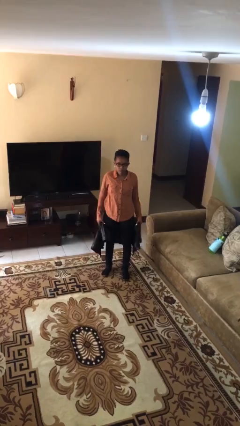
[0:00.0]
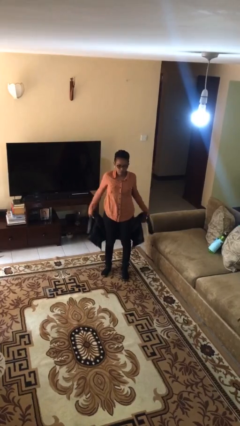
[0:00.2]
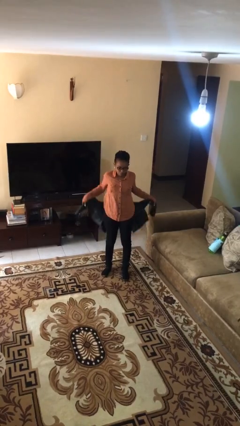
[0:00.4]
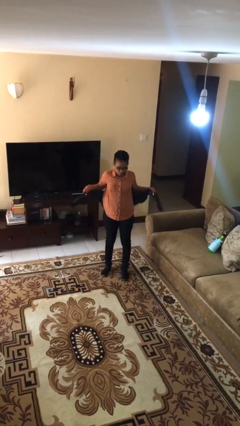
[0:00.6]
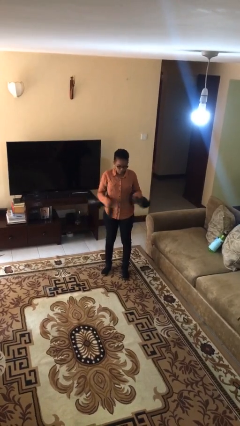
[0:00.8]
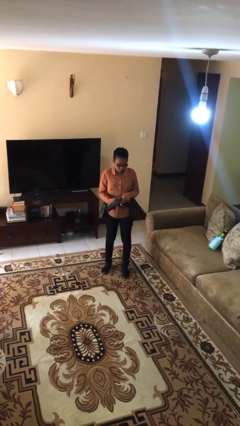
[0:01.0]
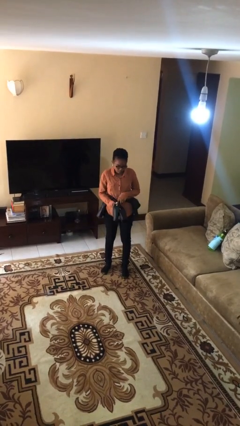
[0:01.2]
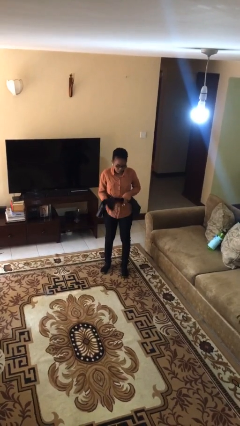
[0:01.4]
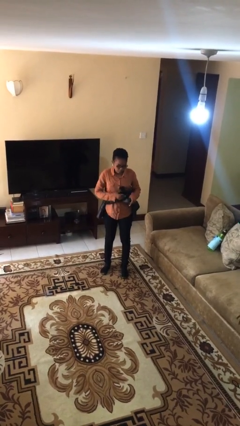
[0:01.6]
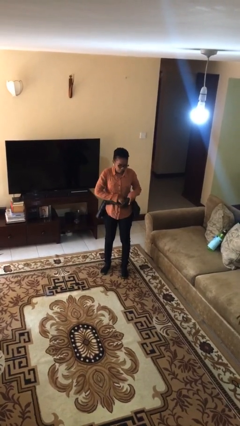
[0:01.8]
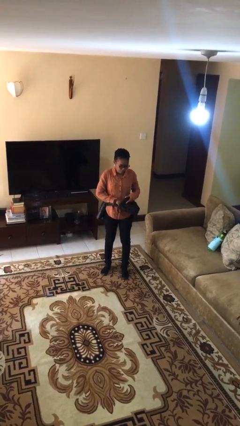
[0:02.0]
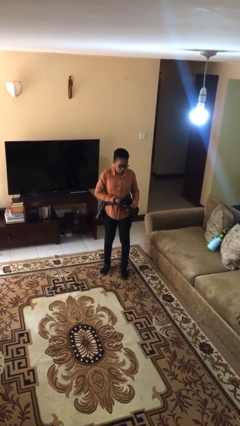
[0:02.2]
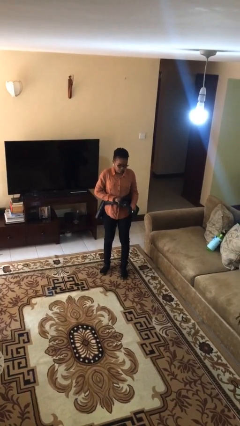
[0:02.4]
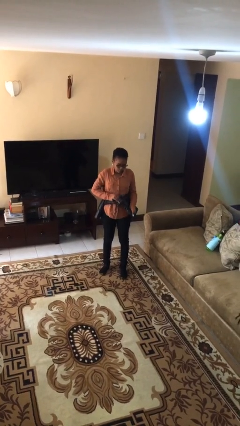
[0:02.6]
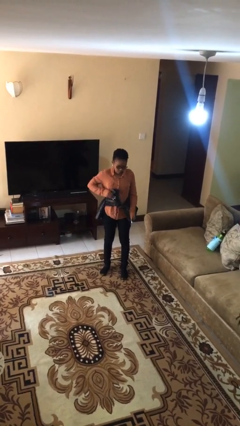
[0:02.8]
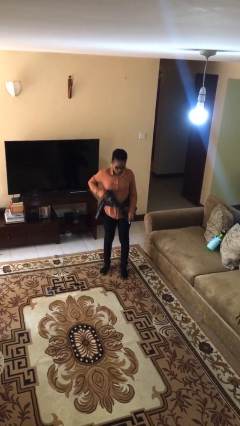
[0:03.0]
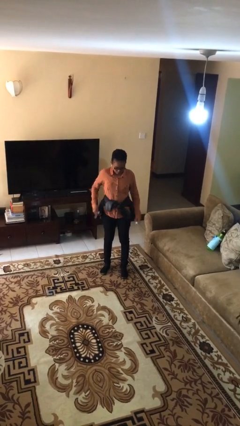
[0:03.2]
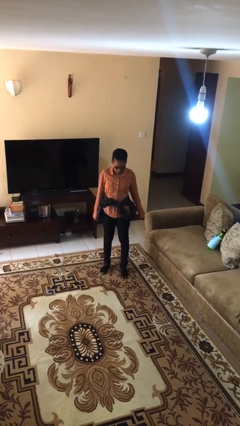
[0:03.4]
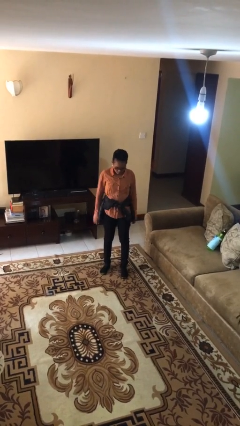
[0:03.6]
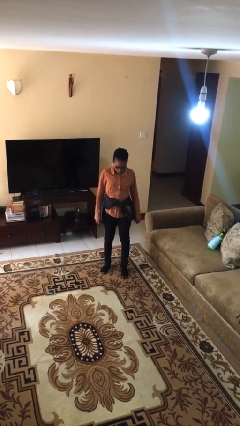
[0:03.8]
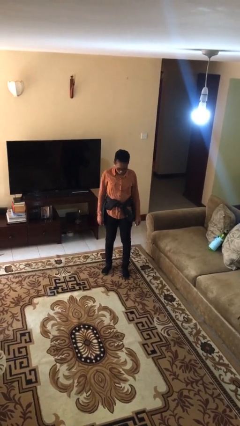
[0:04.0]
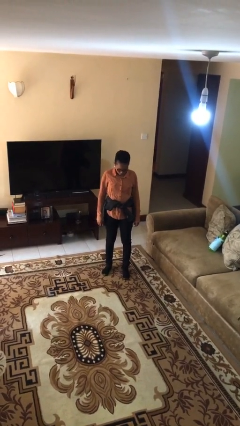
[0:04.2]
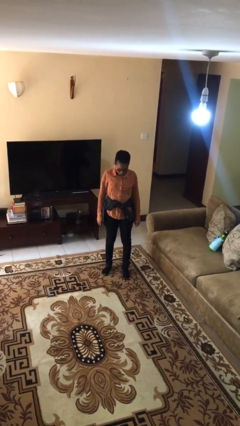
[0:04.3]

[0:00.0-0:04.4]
person ties jacket around waist

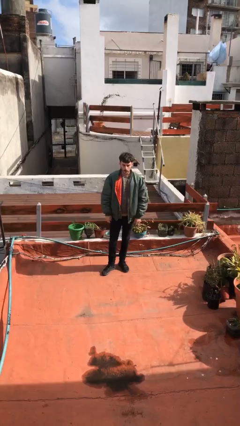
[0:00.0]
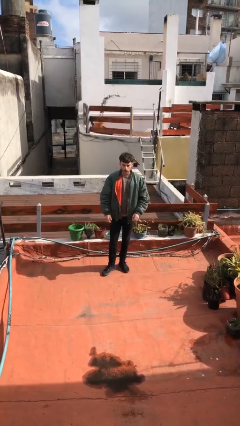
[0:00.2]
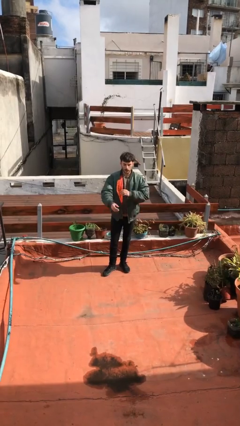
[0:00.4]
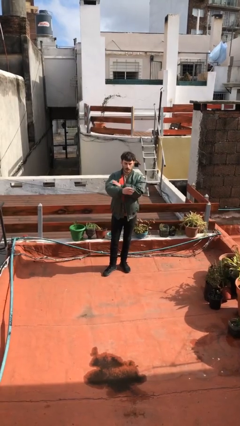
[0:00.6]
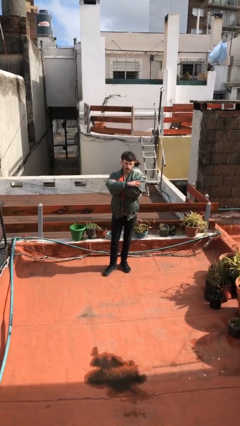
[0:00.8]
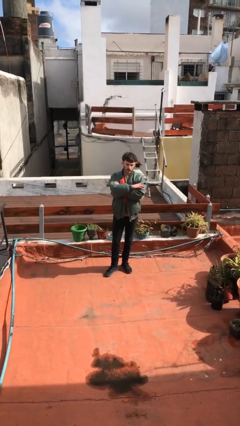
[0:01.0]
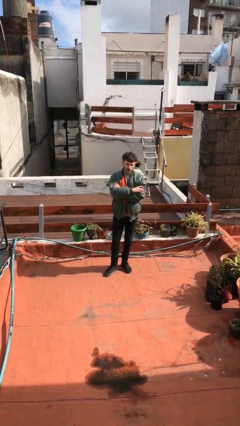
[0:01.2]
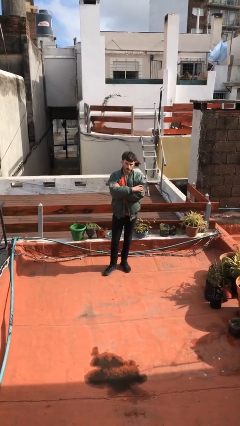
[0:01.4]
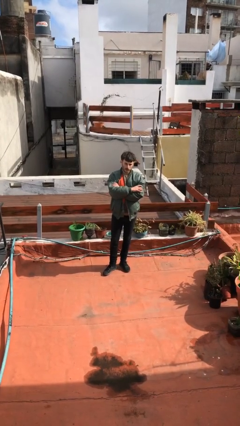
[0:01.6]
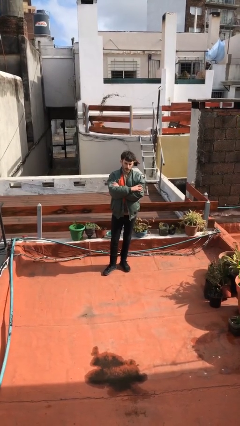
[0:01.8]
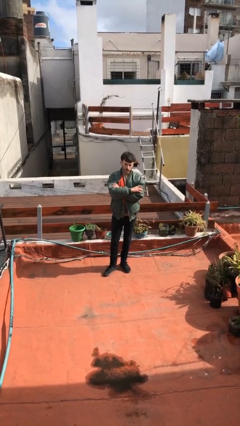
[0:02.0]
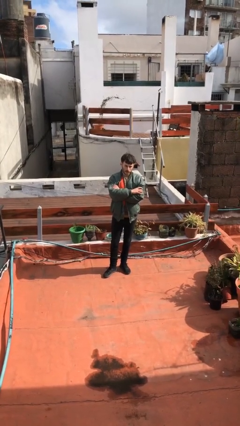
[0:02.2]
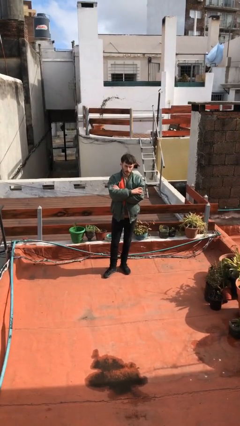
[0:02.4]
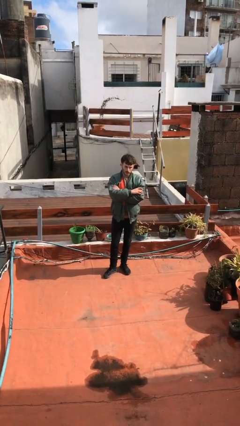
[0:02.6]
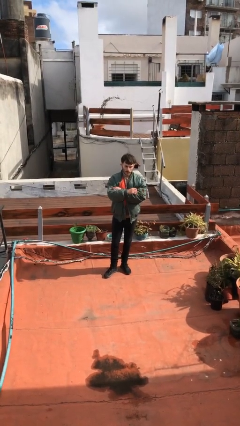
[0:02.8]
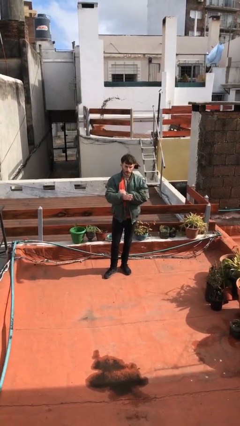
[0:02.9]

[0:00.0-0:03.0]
person crosses arms

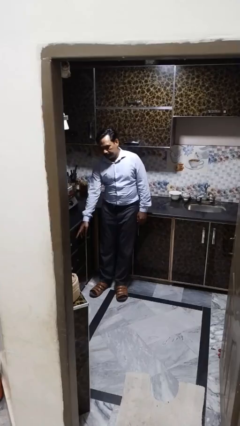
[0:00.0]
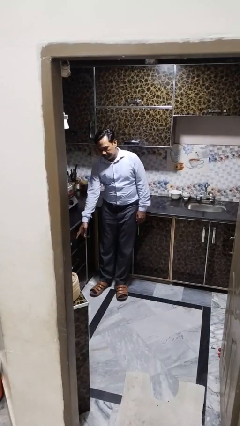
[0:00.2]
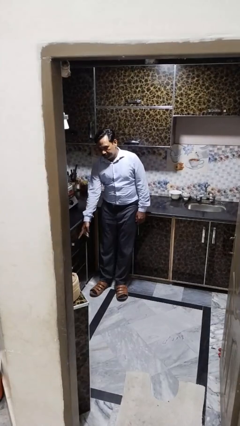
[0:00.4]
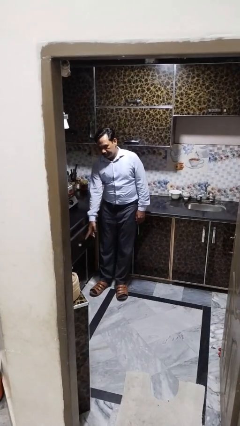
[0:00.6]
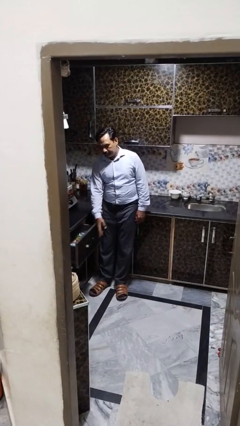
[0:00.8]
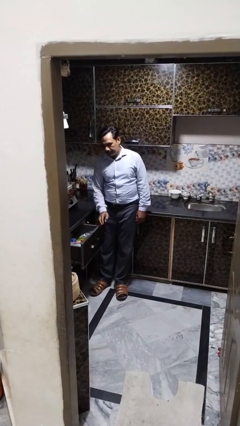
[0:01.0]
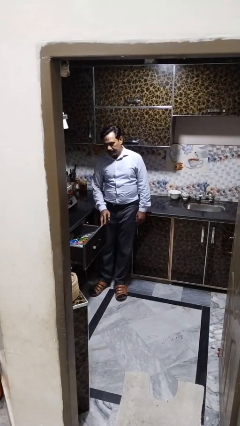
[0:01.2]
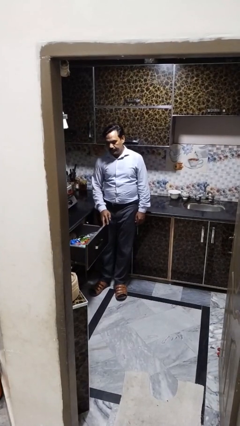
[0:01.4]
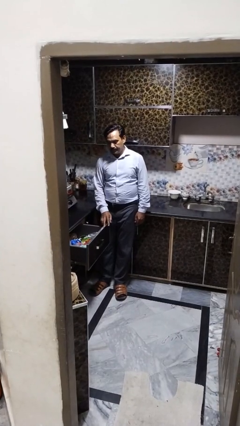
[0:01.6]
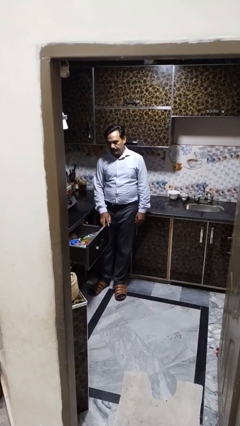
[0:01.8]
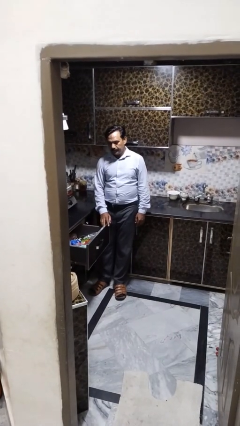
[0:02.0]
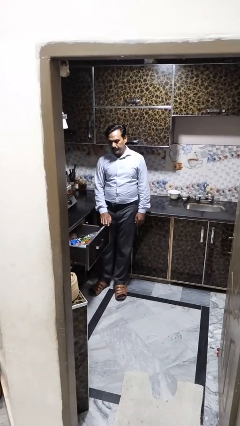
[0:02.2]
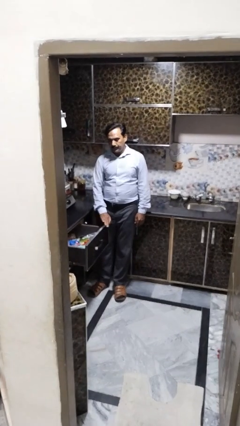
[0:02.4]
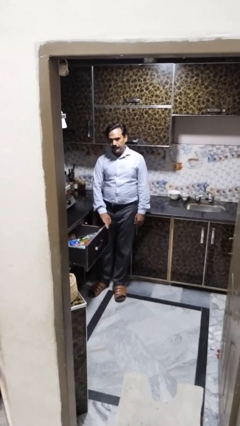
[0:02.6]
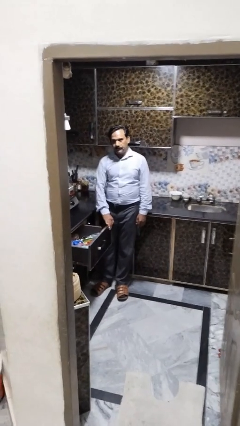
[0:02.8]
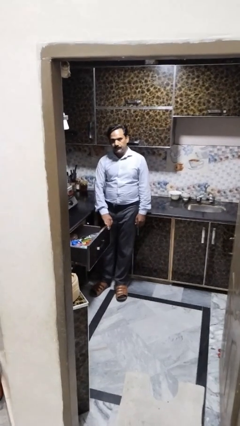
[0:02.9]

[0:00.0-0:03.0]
person opens kitchen drawer

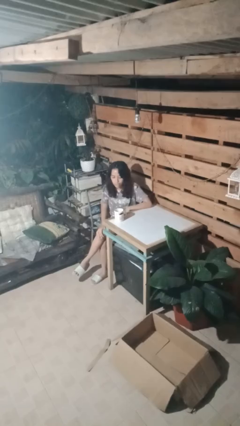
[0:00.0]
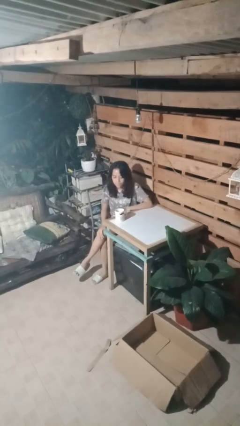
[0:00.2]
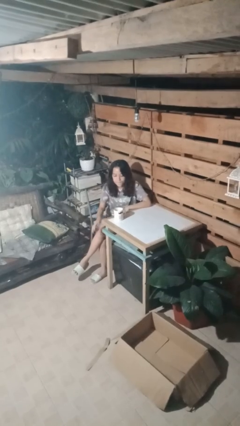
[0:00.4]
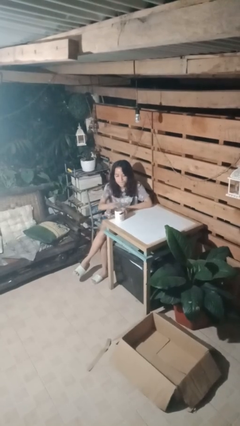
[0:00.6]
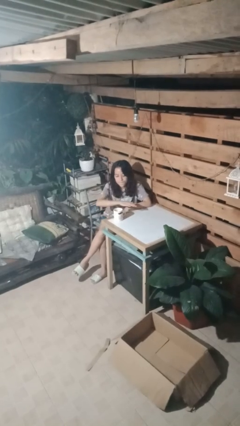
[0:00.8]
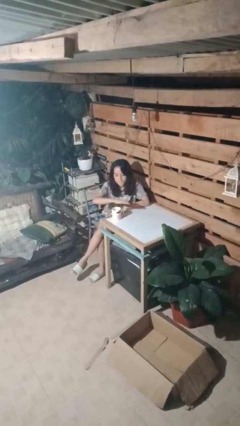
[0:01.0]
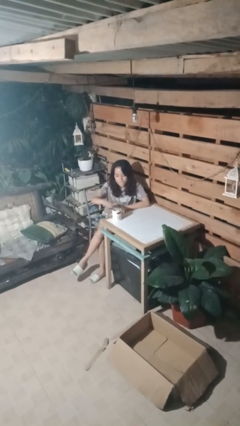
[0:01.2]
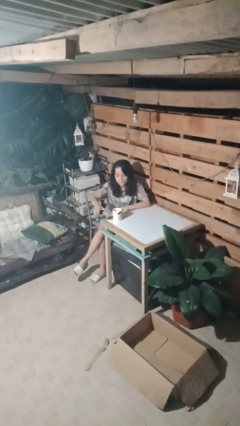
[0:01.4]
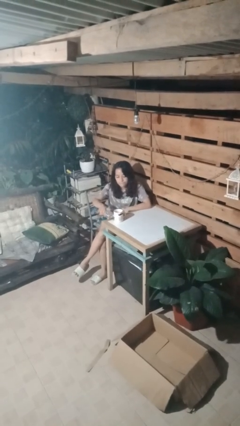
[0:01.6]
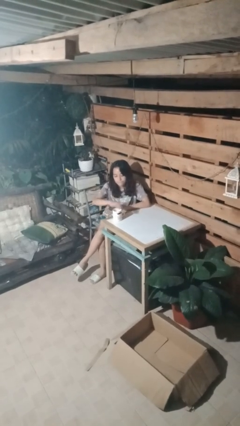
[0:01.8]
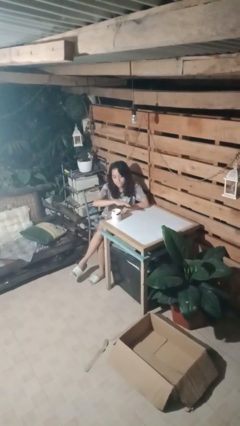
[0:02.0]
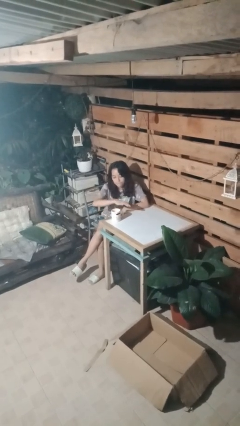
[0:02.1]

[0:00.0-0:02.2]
person waves hand over object

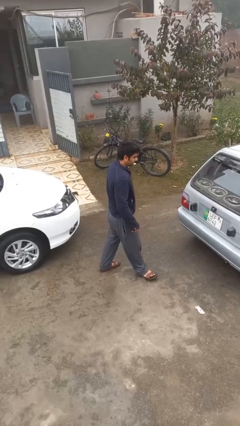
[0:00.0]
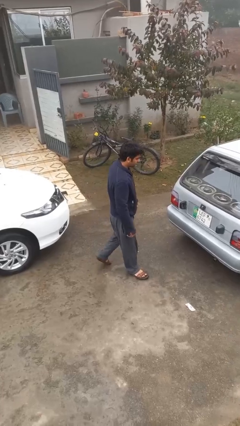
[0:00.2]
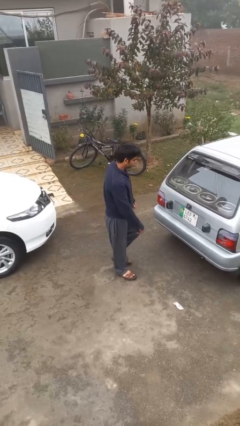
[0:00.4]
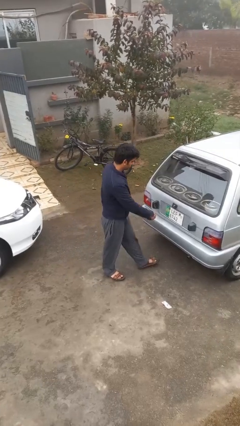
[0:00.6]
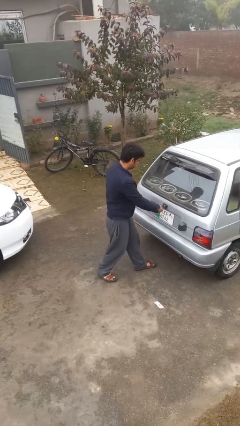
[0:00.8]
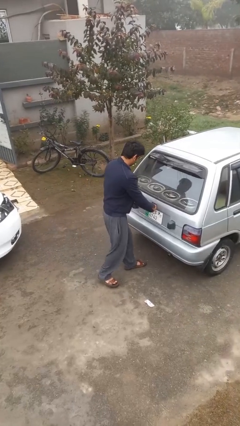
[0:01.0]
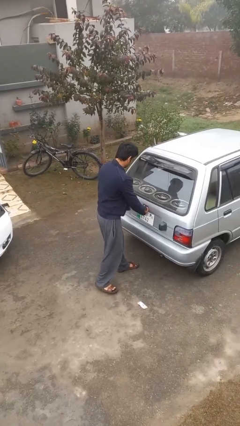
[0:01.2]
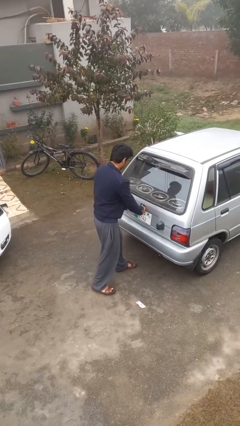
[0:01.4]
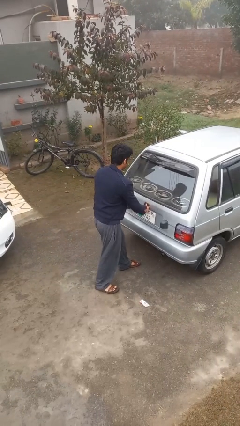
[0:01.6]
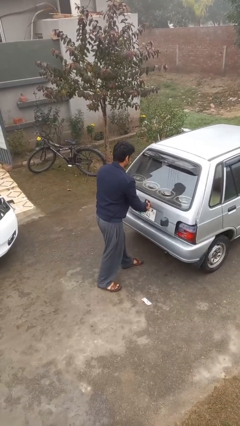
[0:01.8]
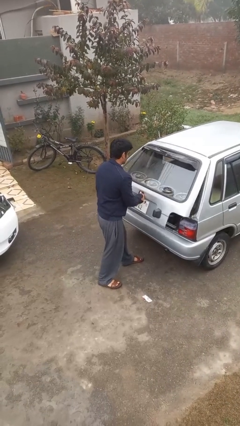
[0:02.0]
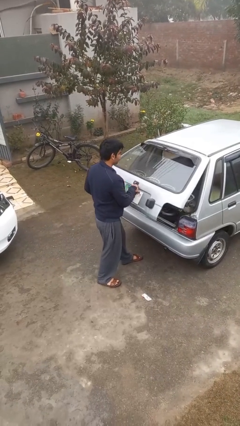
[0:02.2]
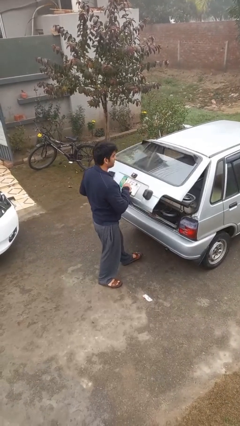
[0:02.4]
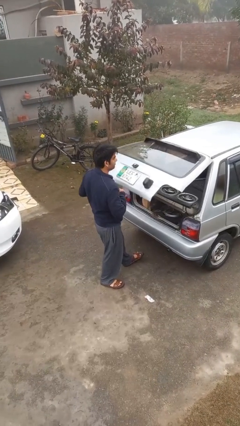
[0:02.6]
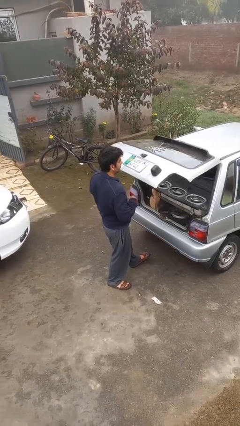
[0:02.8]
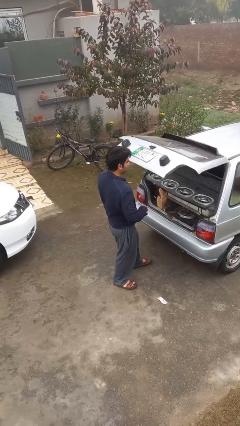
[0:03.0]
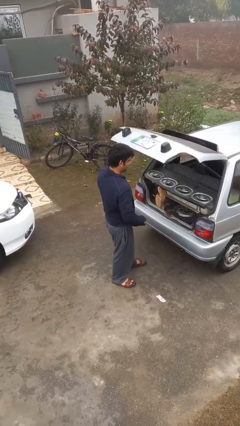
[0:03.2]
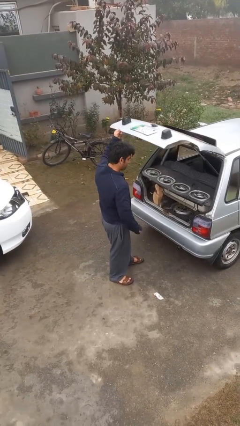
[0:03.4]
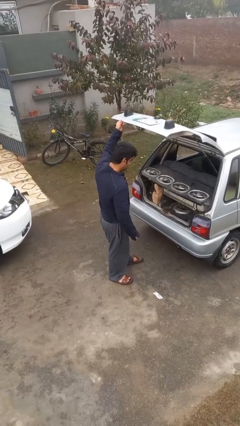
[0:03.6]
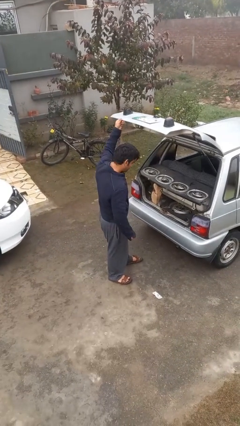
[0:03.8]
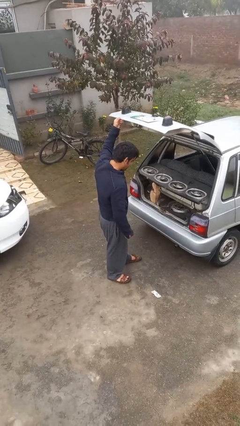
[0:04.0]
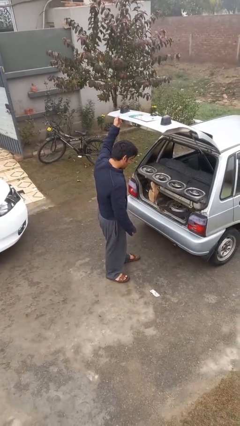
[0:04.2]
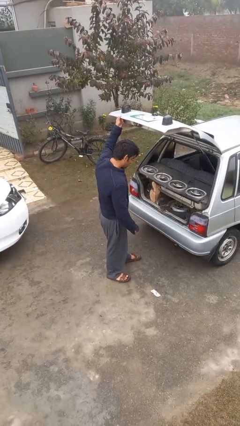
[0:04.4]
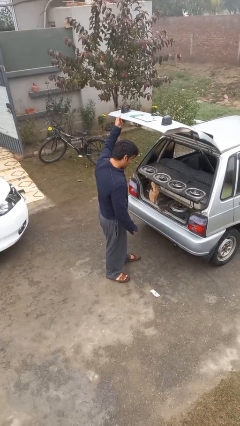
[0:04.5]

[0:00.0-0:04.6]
person opens car trunk
